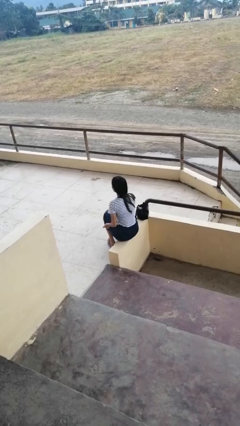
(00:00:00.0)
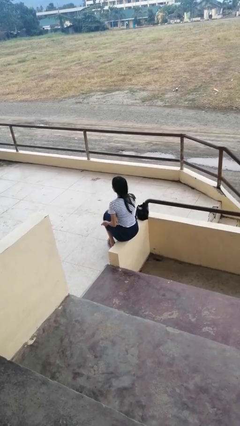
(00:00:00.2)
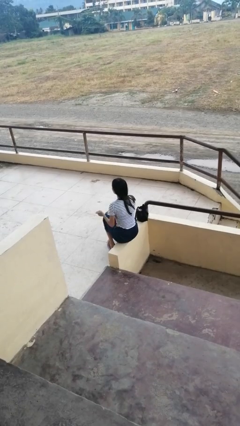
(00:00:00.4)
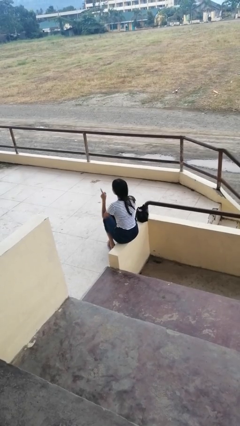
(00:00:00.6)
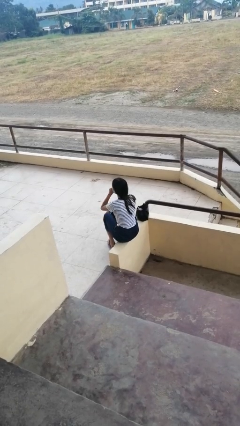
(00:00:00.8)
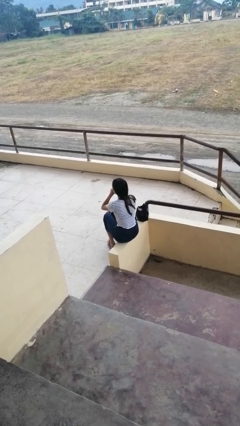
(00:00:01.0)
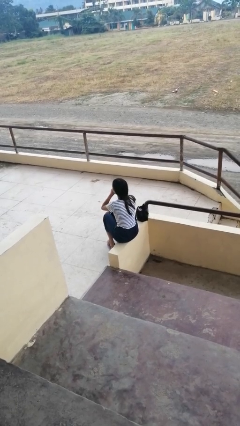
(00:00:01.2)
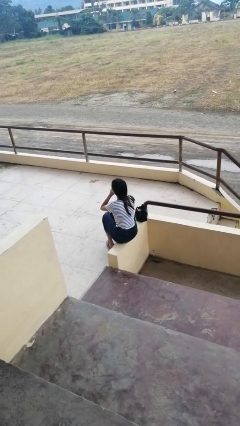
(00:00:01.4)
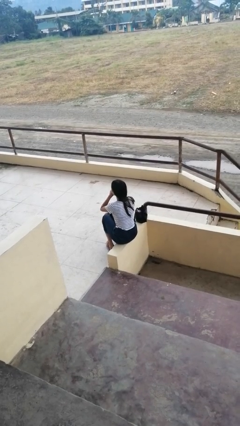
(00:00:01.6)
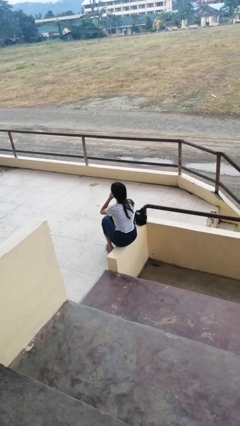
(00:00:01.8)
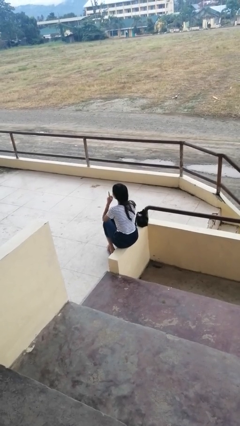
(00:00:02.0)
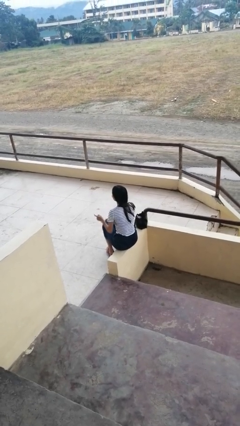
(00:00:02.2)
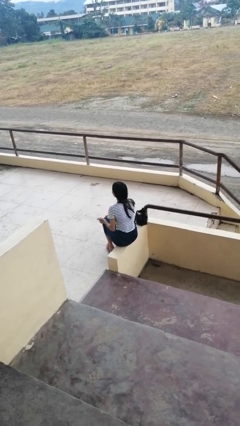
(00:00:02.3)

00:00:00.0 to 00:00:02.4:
person gestures be quiet

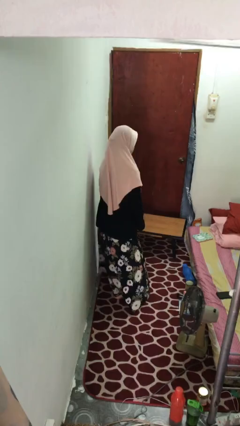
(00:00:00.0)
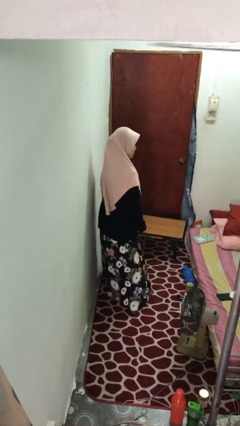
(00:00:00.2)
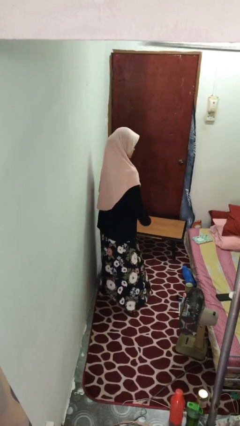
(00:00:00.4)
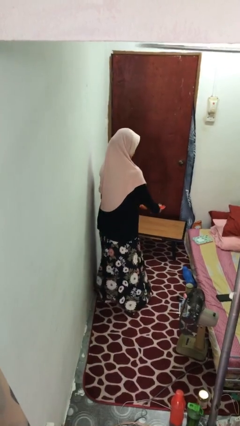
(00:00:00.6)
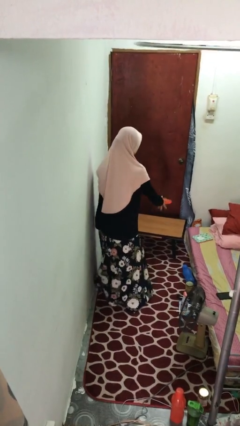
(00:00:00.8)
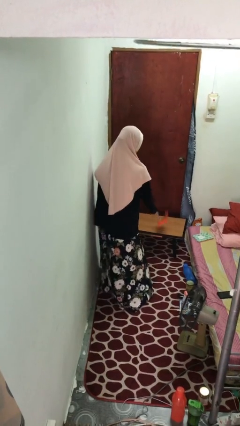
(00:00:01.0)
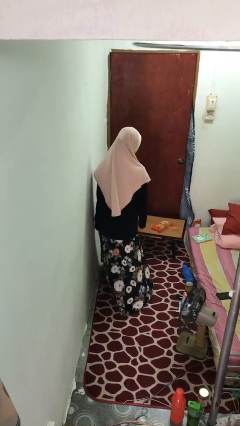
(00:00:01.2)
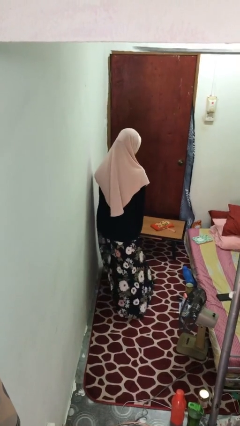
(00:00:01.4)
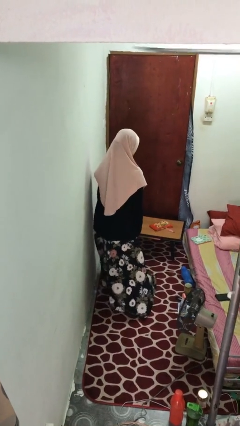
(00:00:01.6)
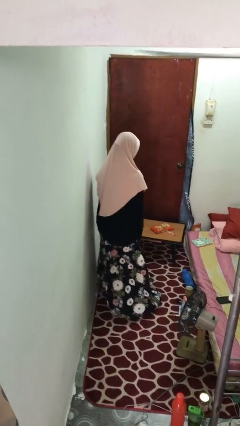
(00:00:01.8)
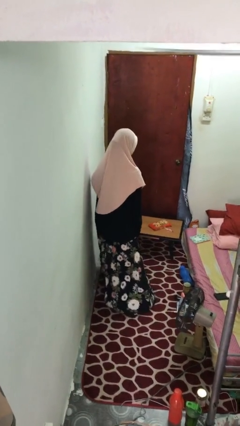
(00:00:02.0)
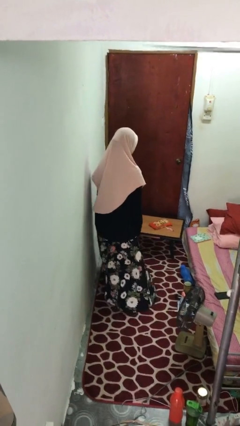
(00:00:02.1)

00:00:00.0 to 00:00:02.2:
person throws object on table

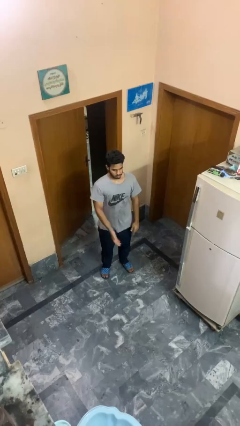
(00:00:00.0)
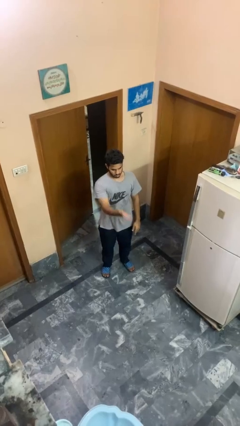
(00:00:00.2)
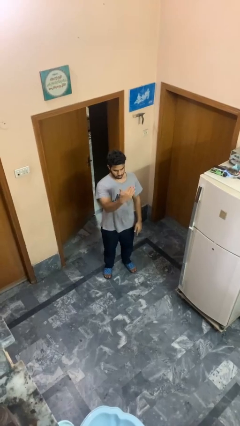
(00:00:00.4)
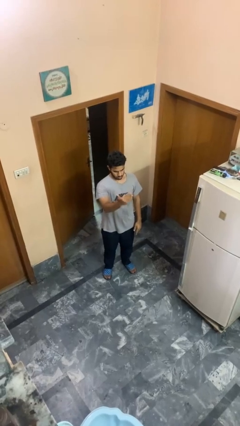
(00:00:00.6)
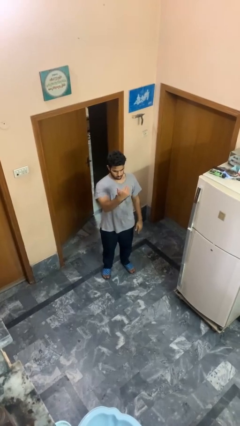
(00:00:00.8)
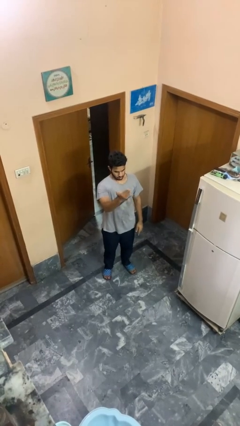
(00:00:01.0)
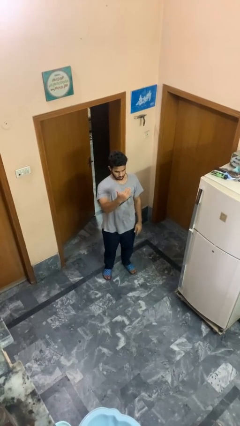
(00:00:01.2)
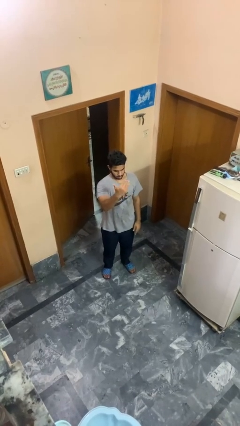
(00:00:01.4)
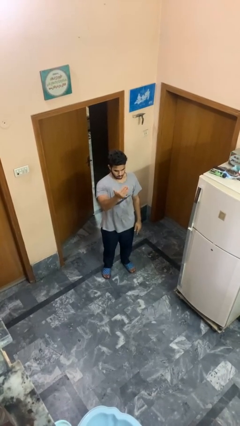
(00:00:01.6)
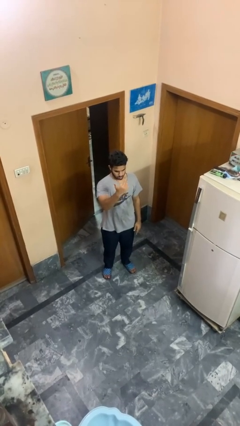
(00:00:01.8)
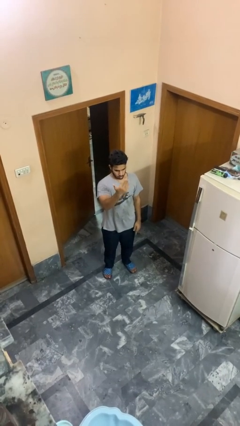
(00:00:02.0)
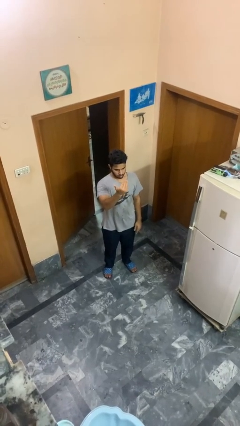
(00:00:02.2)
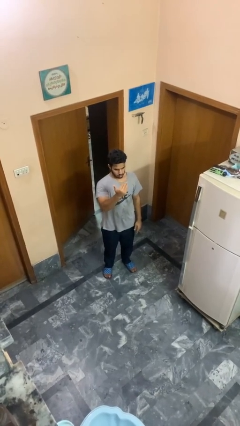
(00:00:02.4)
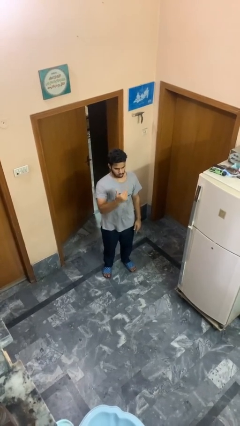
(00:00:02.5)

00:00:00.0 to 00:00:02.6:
person gestures come here

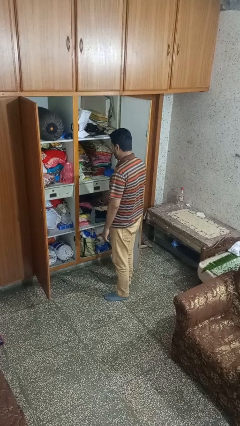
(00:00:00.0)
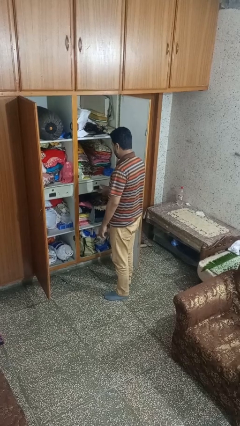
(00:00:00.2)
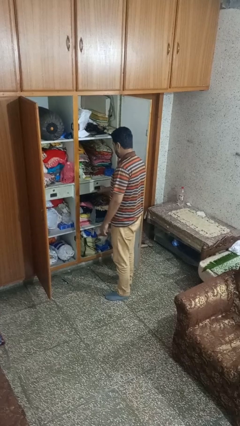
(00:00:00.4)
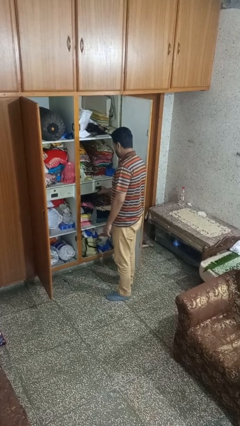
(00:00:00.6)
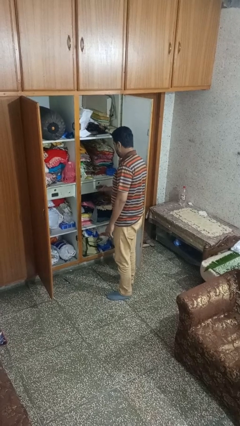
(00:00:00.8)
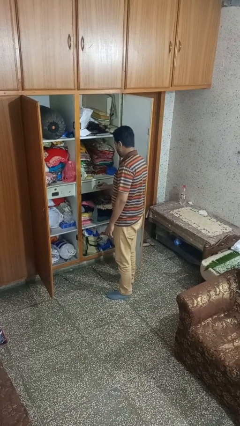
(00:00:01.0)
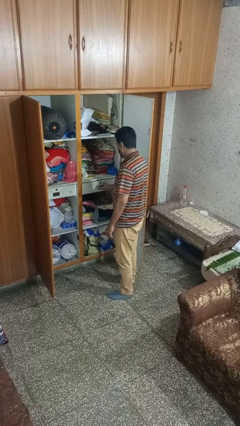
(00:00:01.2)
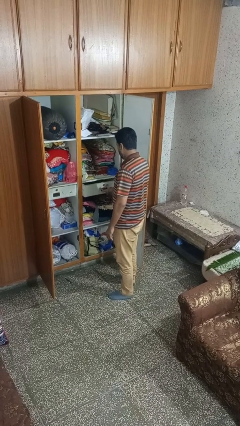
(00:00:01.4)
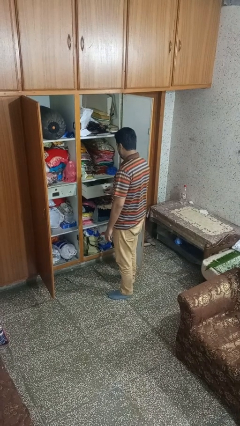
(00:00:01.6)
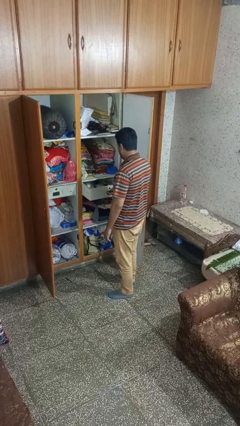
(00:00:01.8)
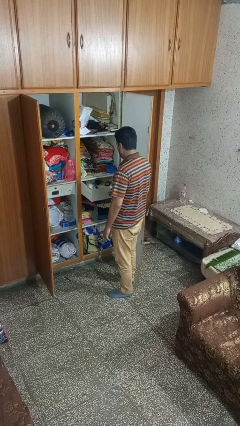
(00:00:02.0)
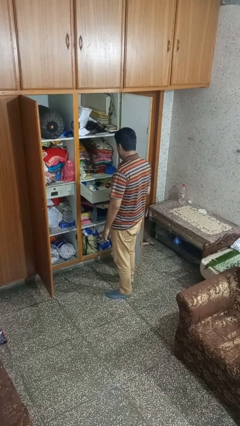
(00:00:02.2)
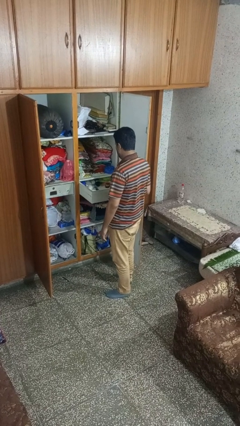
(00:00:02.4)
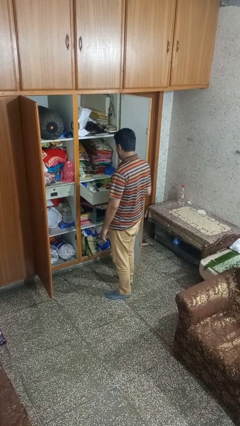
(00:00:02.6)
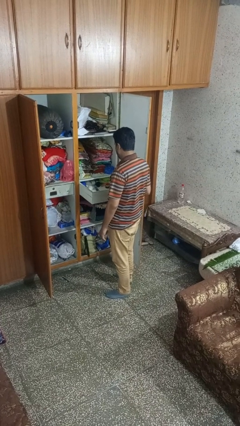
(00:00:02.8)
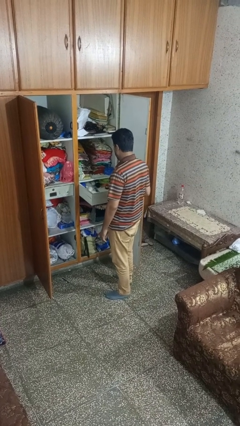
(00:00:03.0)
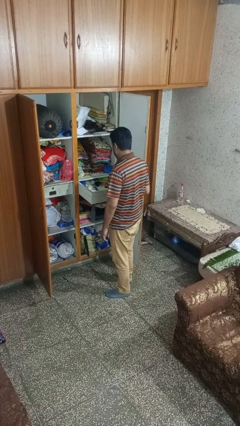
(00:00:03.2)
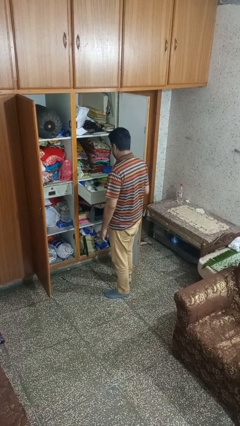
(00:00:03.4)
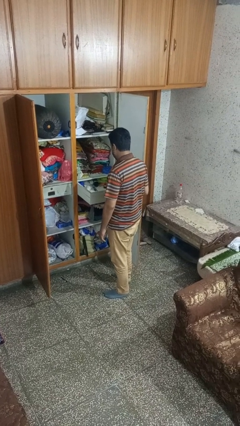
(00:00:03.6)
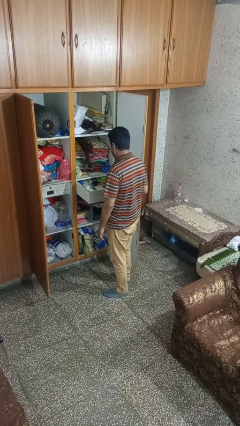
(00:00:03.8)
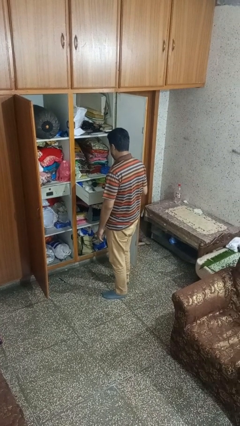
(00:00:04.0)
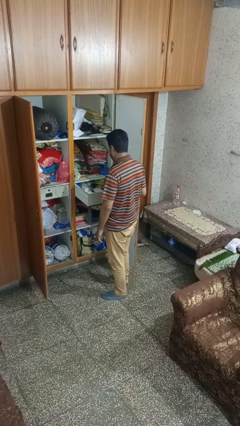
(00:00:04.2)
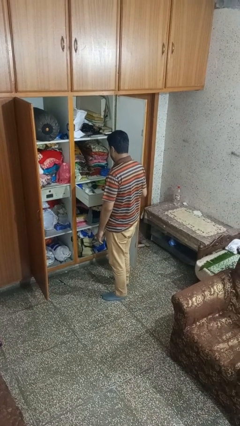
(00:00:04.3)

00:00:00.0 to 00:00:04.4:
person opens dresser drawer

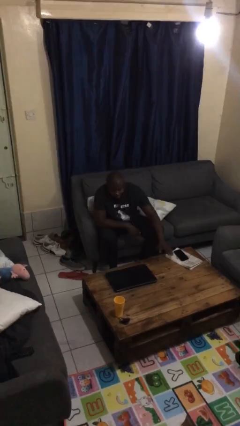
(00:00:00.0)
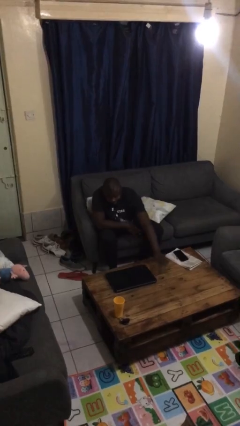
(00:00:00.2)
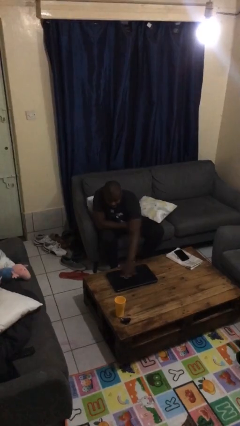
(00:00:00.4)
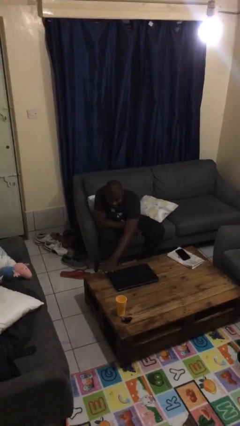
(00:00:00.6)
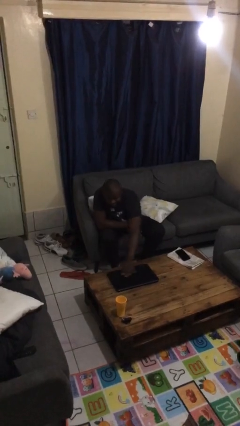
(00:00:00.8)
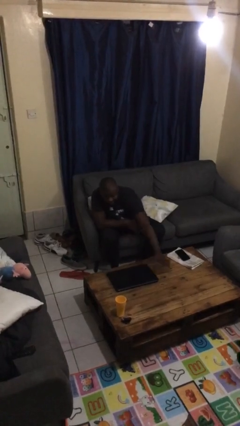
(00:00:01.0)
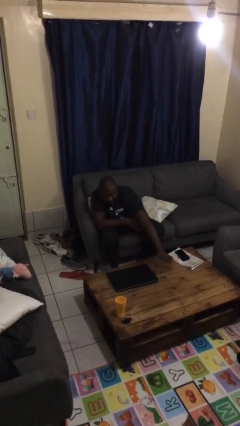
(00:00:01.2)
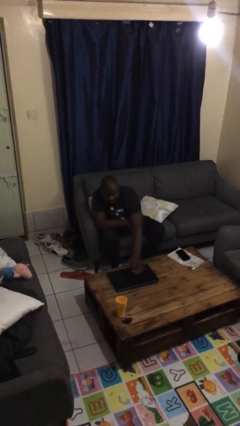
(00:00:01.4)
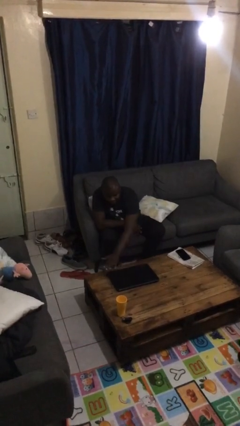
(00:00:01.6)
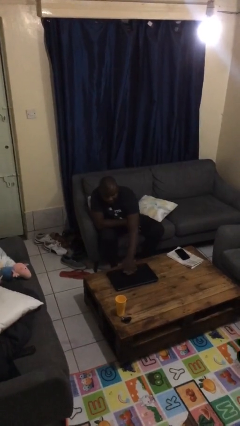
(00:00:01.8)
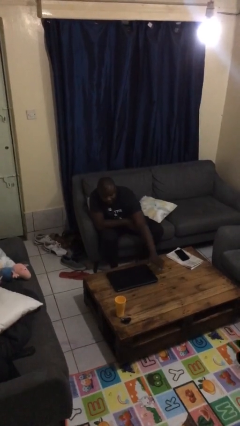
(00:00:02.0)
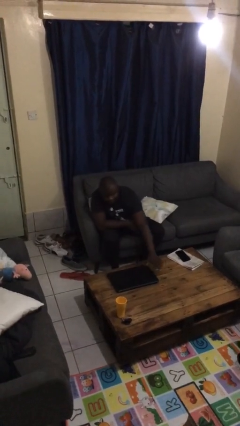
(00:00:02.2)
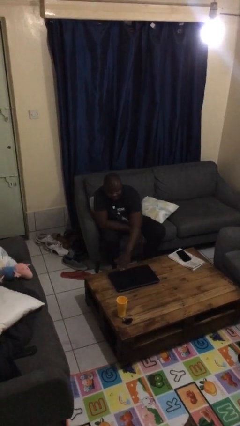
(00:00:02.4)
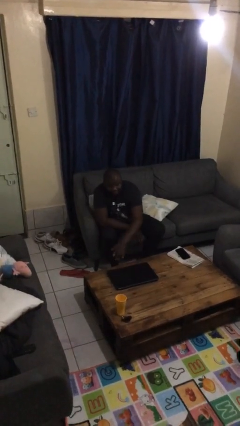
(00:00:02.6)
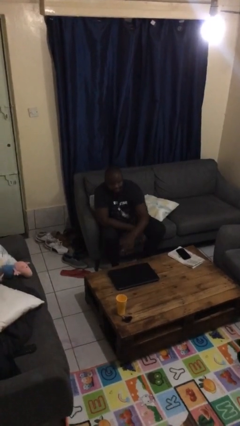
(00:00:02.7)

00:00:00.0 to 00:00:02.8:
person waves hand over object

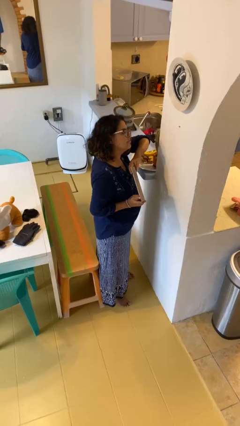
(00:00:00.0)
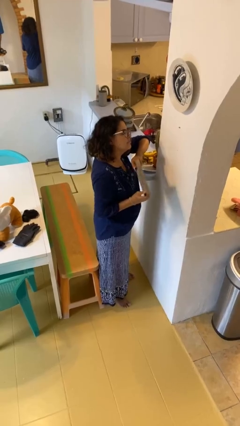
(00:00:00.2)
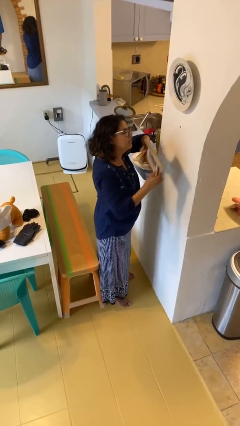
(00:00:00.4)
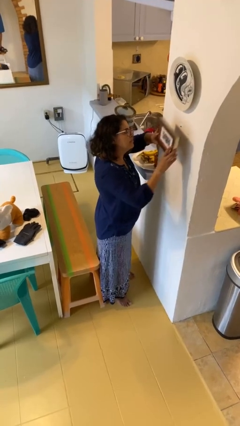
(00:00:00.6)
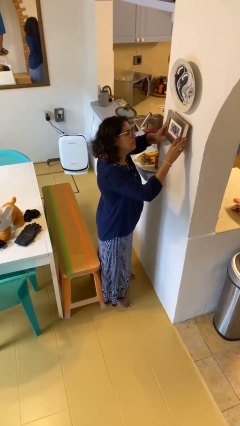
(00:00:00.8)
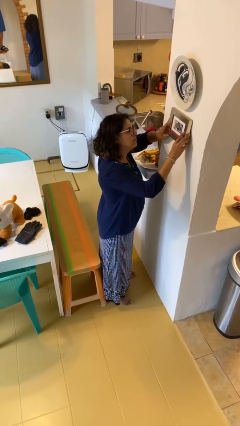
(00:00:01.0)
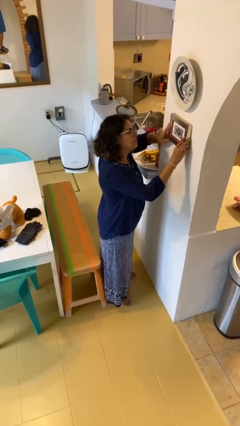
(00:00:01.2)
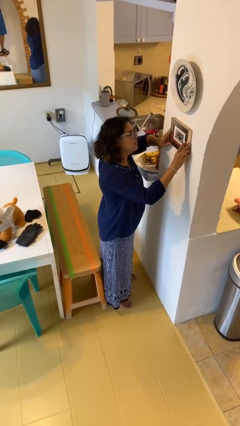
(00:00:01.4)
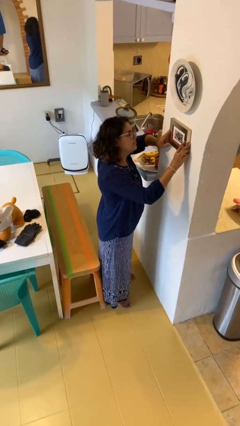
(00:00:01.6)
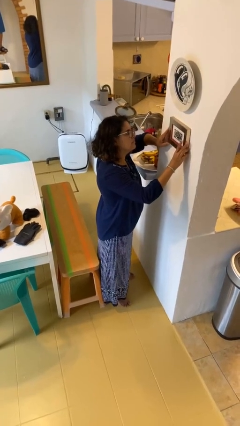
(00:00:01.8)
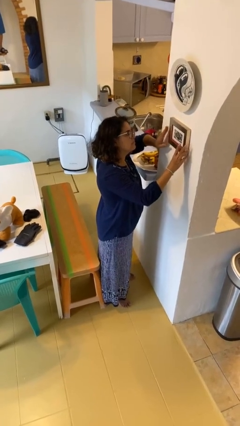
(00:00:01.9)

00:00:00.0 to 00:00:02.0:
person puts up picture frame

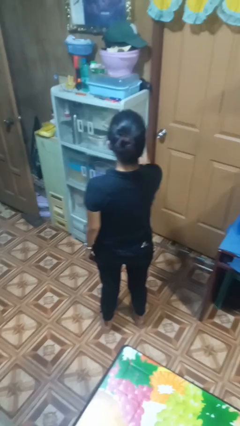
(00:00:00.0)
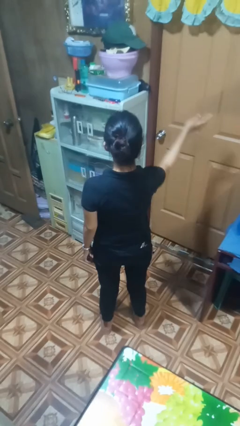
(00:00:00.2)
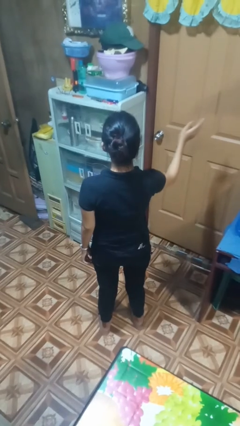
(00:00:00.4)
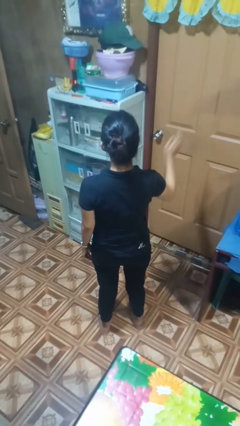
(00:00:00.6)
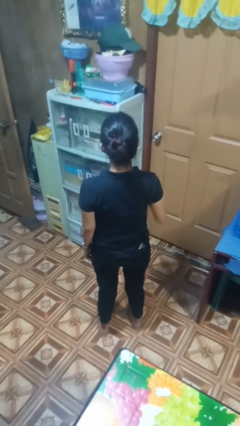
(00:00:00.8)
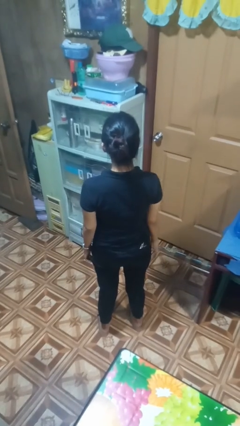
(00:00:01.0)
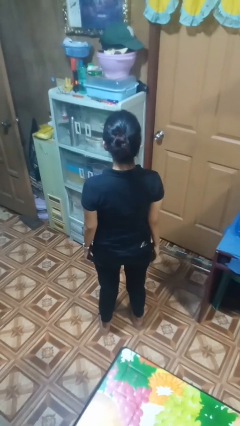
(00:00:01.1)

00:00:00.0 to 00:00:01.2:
person gestures swipe right
